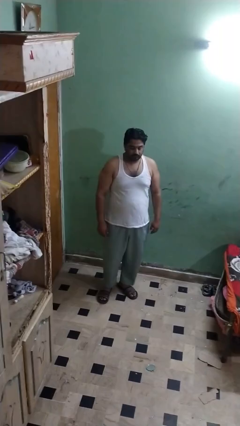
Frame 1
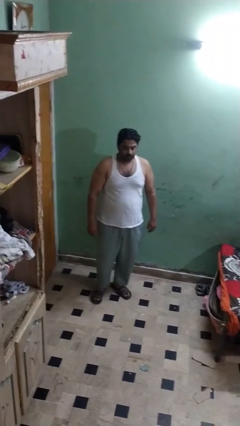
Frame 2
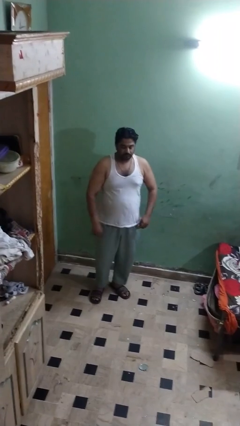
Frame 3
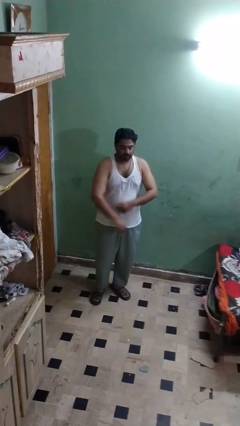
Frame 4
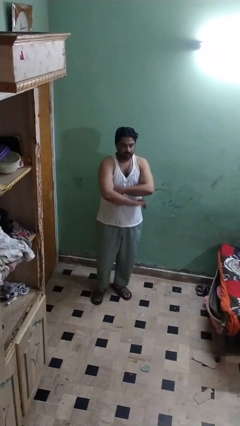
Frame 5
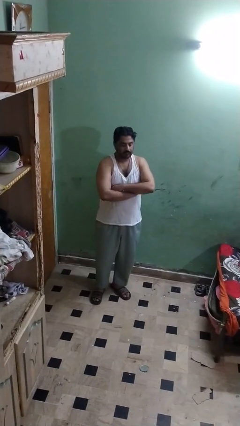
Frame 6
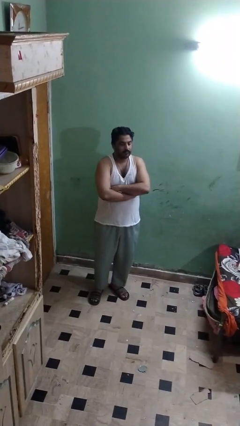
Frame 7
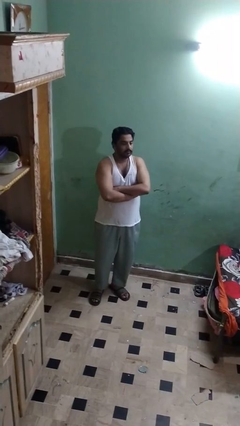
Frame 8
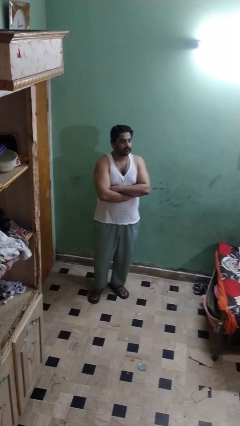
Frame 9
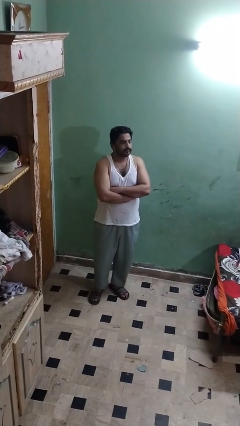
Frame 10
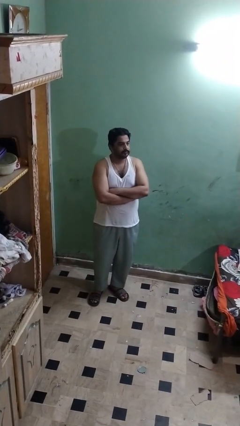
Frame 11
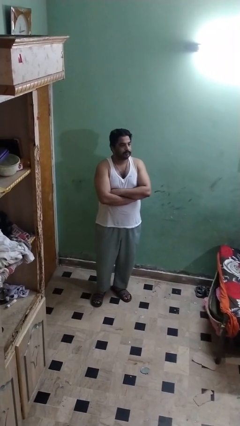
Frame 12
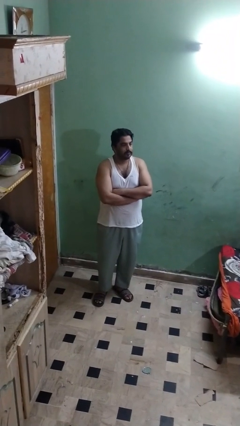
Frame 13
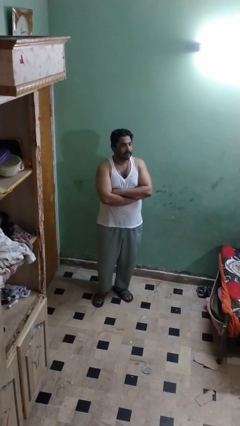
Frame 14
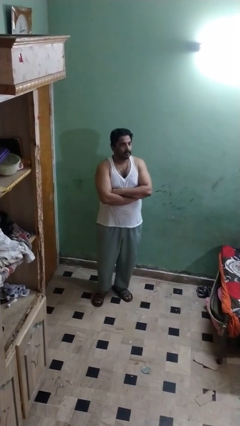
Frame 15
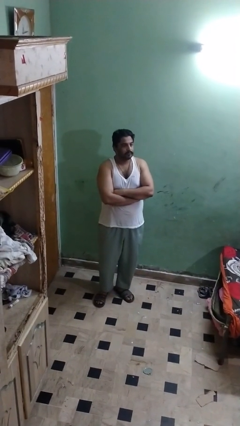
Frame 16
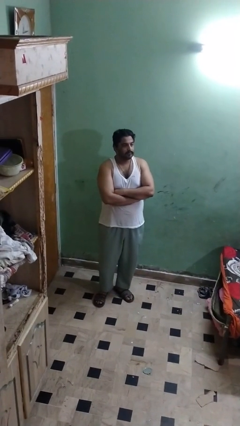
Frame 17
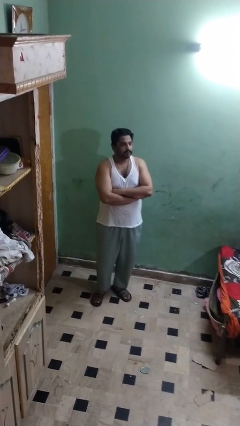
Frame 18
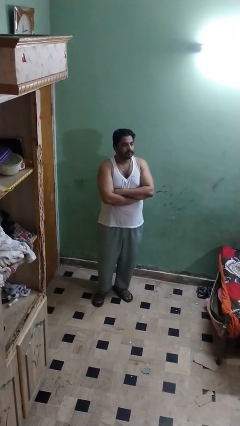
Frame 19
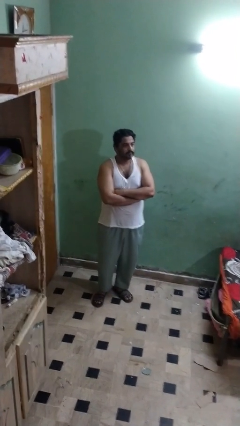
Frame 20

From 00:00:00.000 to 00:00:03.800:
person crosses arms

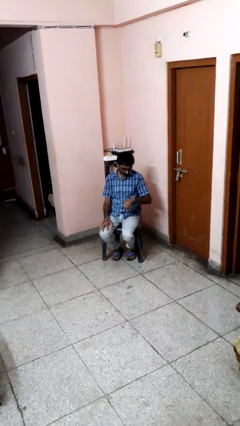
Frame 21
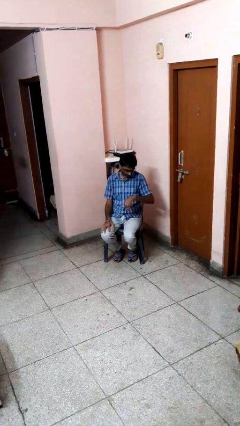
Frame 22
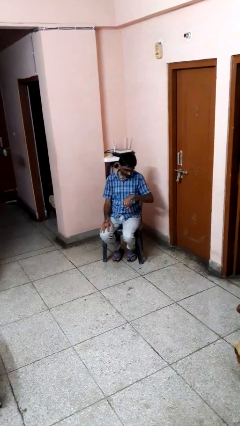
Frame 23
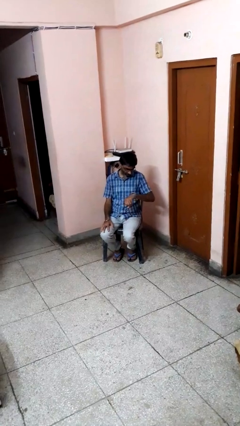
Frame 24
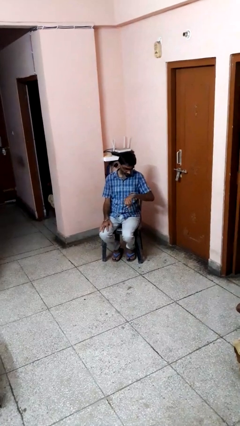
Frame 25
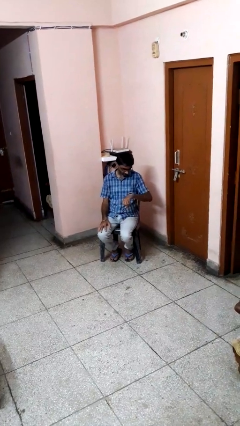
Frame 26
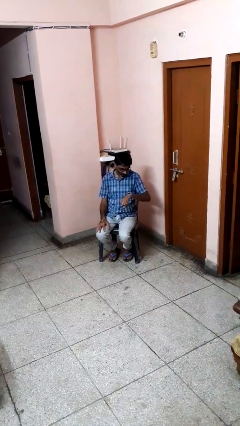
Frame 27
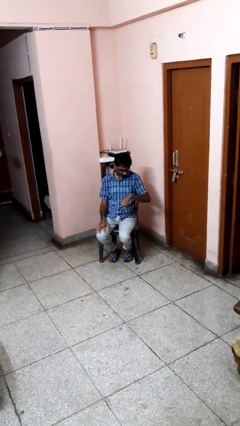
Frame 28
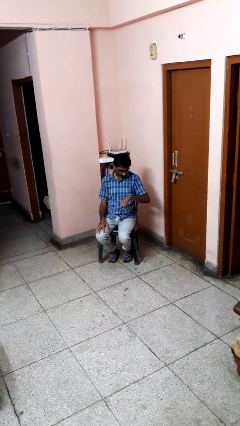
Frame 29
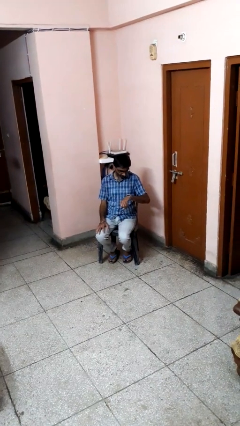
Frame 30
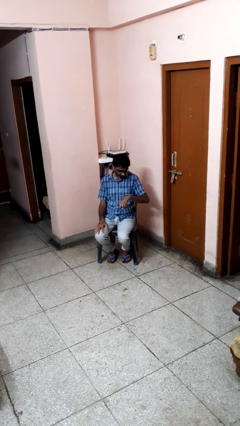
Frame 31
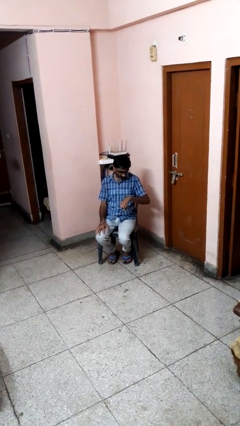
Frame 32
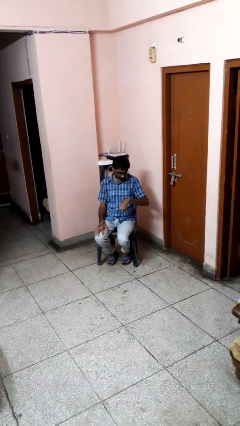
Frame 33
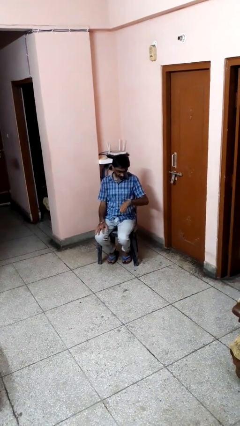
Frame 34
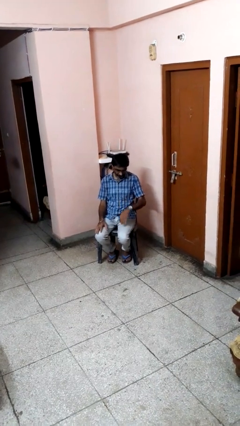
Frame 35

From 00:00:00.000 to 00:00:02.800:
person looks at wristwatch

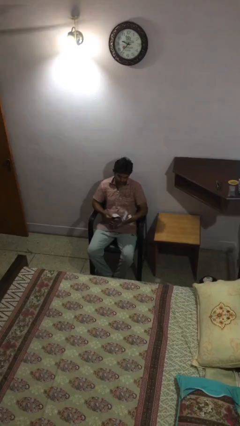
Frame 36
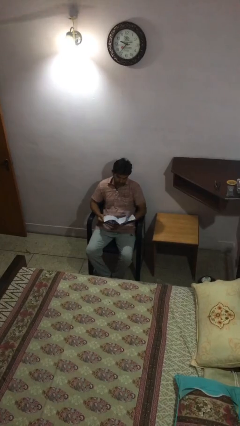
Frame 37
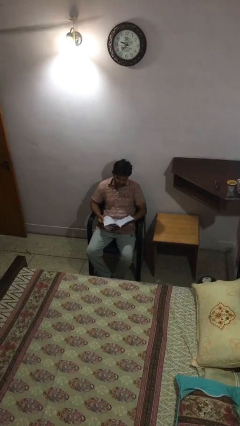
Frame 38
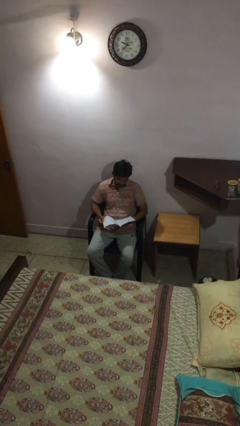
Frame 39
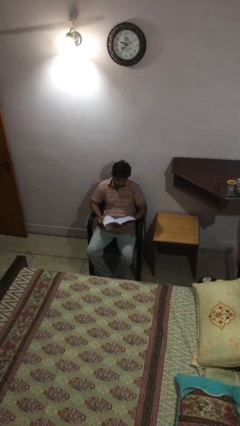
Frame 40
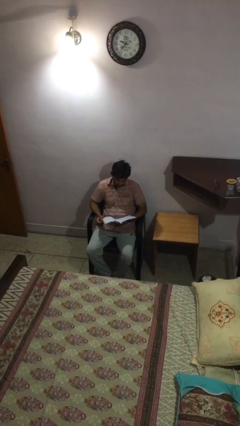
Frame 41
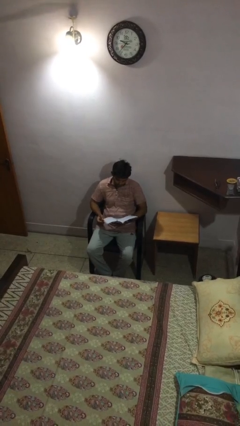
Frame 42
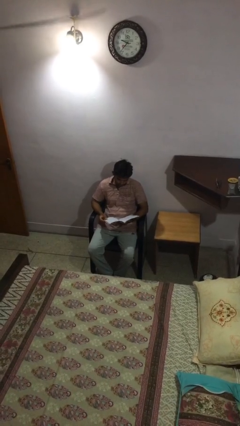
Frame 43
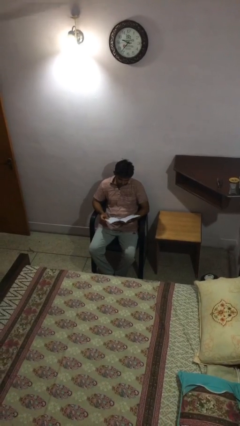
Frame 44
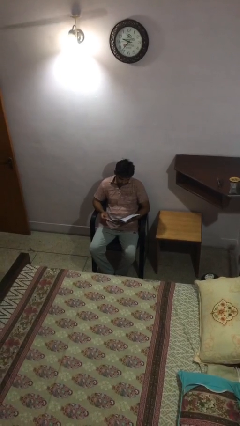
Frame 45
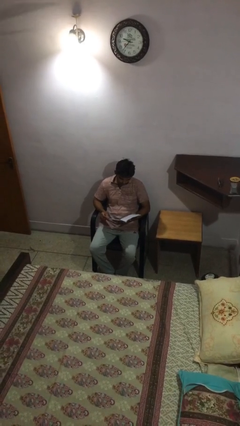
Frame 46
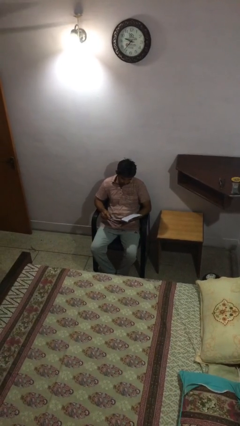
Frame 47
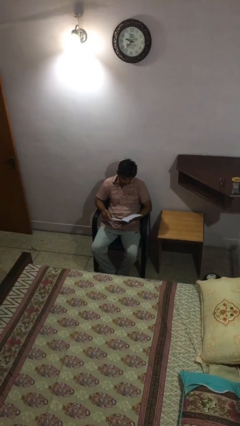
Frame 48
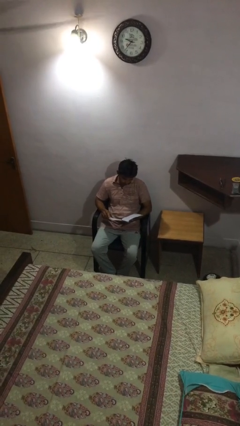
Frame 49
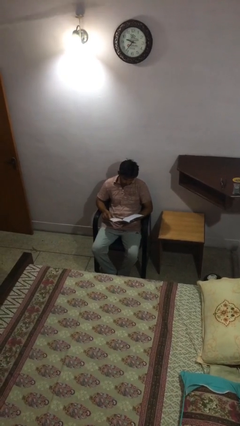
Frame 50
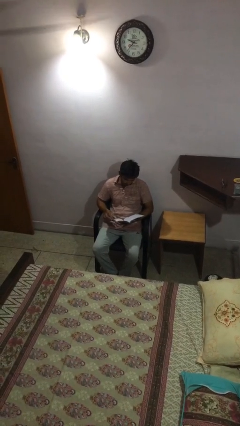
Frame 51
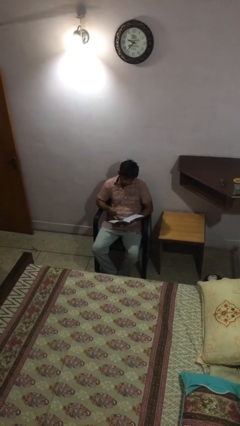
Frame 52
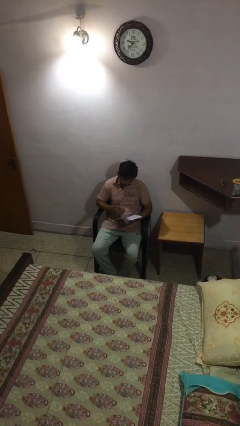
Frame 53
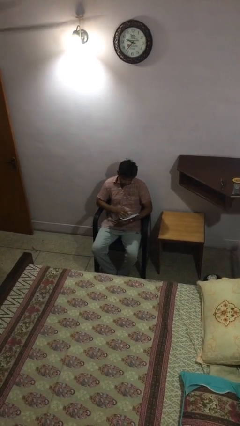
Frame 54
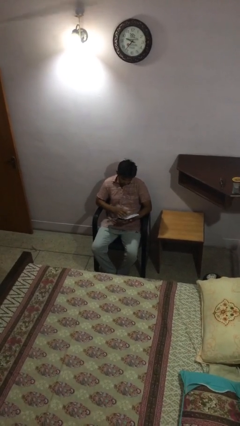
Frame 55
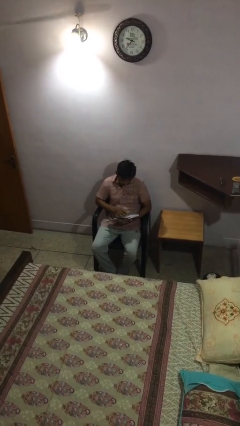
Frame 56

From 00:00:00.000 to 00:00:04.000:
person reads document

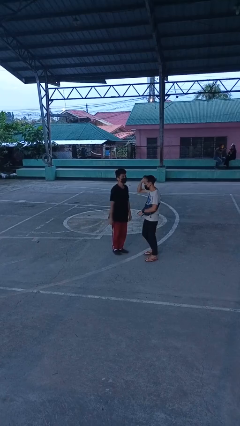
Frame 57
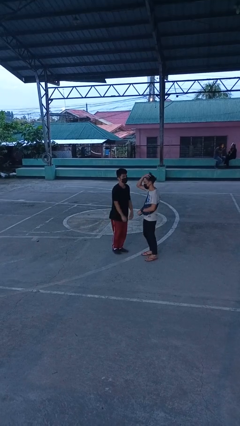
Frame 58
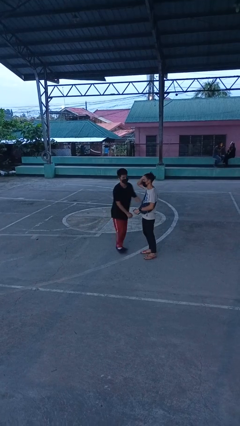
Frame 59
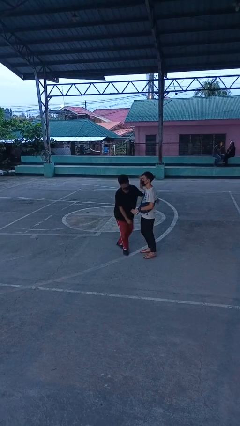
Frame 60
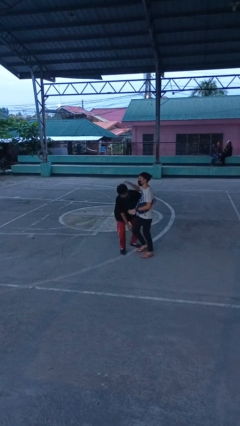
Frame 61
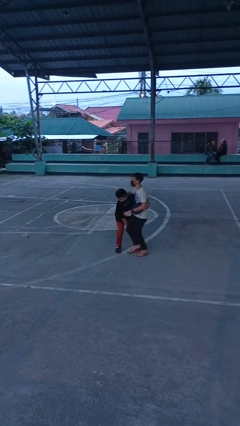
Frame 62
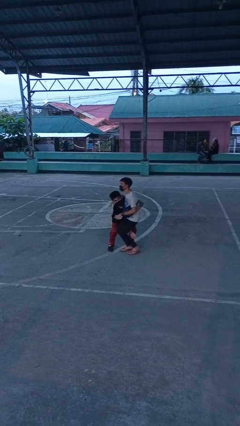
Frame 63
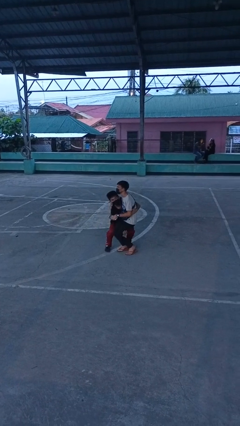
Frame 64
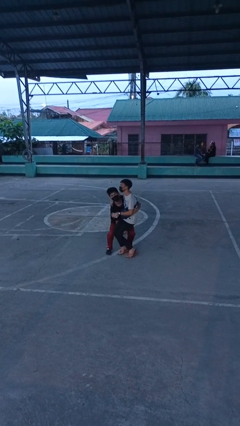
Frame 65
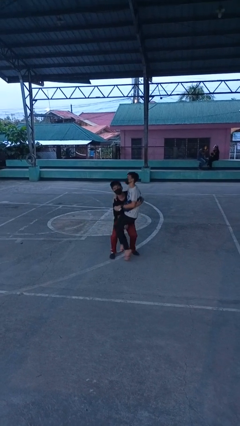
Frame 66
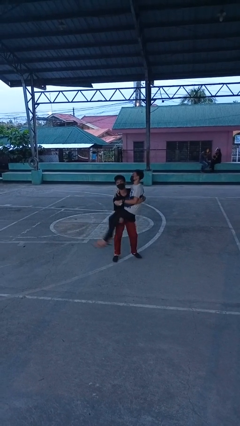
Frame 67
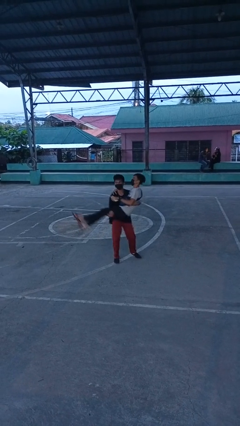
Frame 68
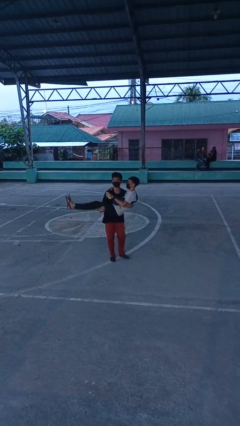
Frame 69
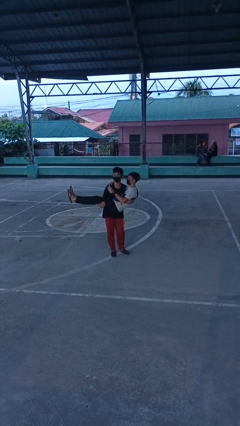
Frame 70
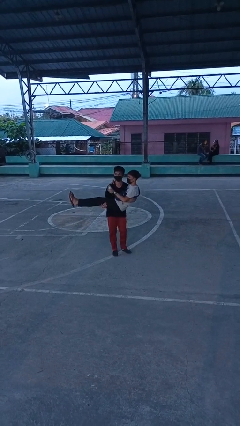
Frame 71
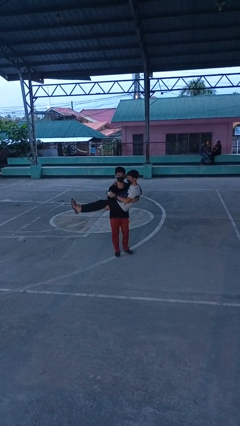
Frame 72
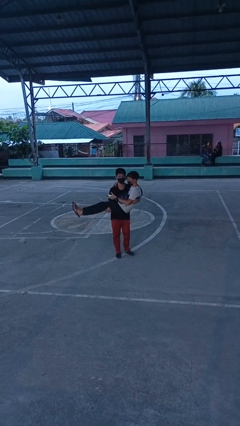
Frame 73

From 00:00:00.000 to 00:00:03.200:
person picks up person

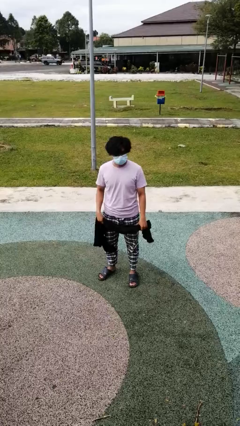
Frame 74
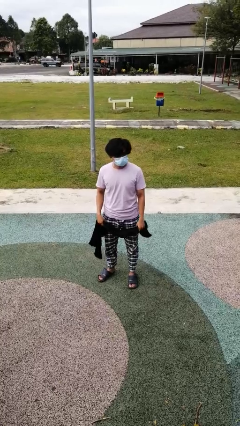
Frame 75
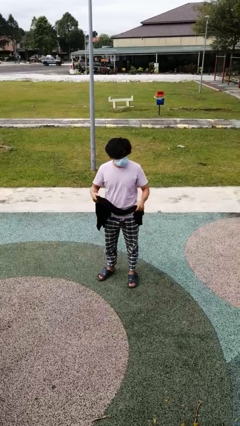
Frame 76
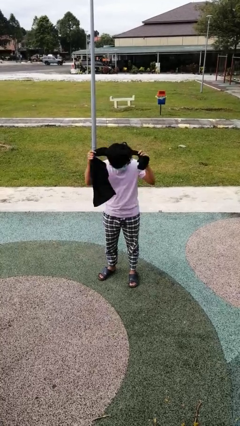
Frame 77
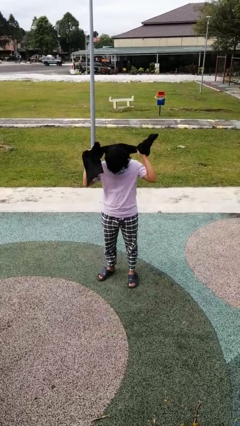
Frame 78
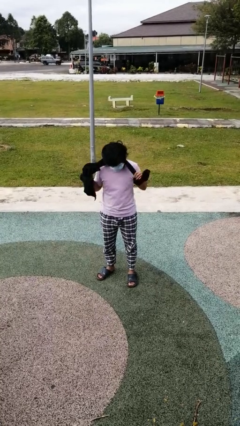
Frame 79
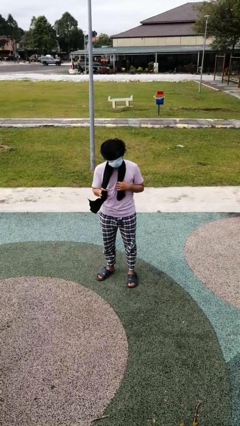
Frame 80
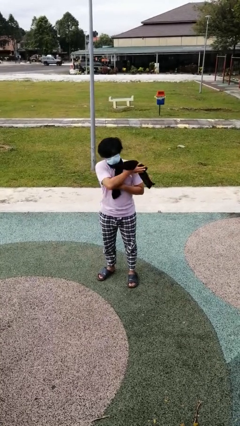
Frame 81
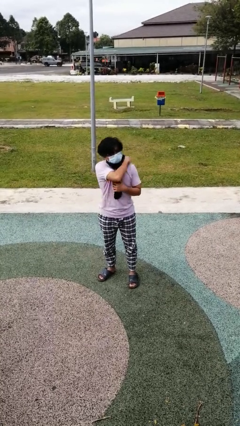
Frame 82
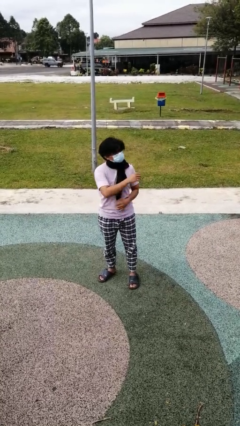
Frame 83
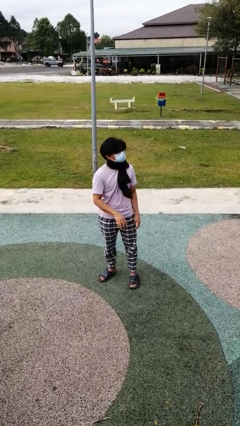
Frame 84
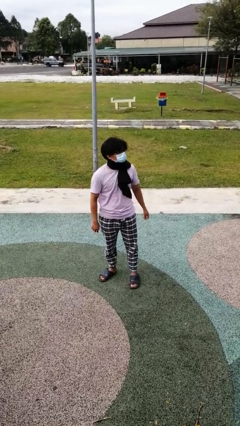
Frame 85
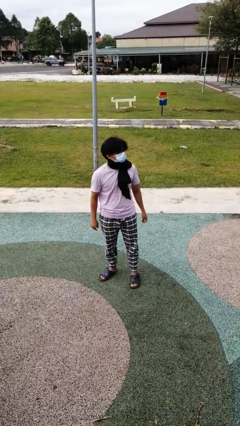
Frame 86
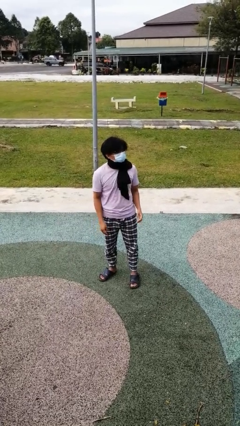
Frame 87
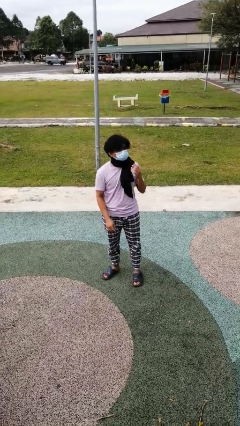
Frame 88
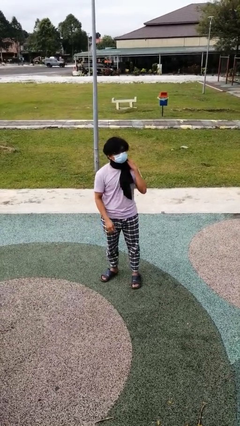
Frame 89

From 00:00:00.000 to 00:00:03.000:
person puts on scarf

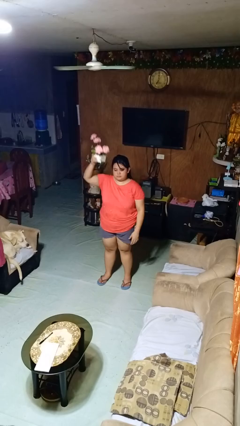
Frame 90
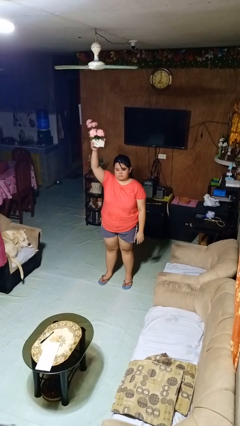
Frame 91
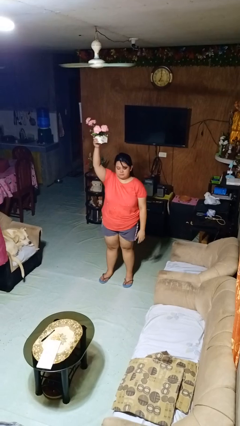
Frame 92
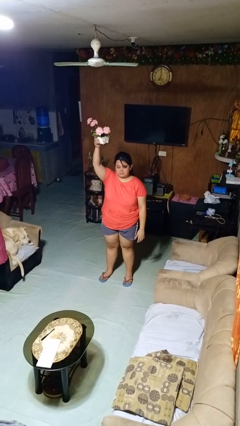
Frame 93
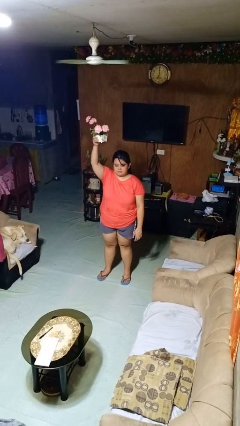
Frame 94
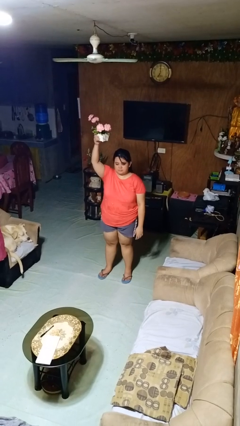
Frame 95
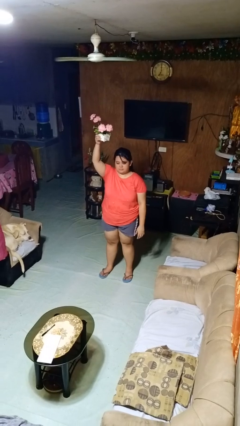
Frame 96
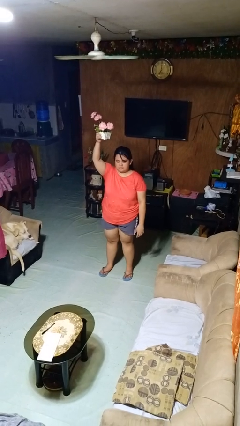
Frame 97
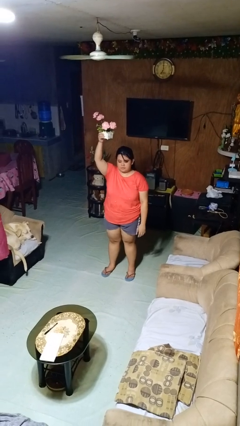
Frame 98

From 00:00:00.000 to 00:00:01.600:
person holds object above head
